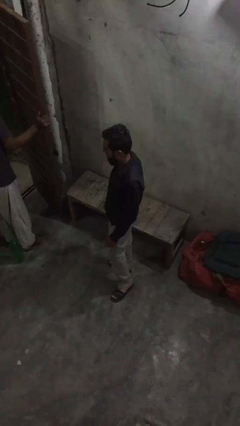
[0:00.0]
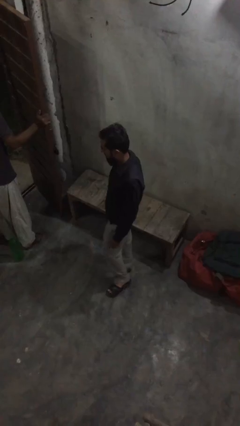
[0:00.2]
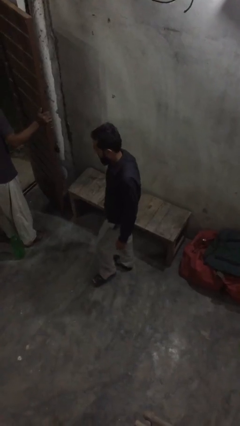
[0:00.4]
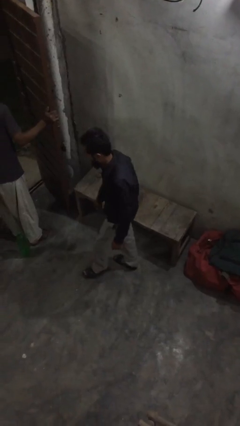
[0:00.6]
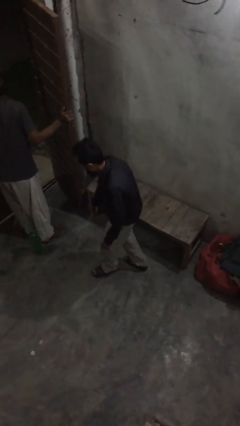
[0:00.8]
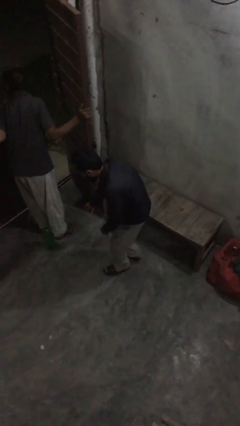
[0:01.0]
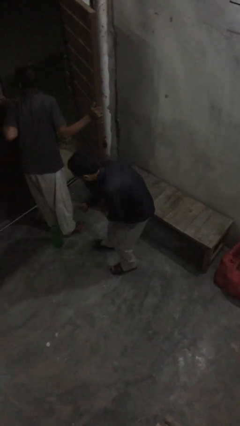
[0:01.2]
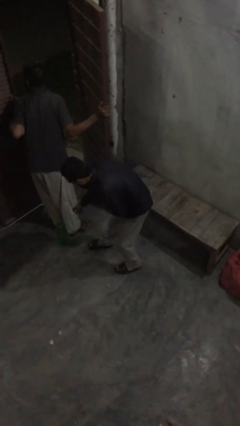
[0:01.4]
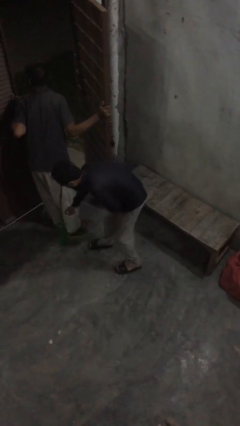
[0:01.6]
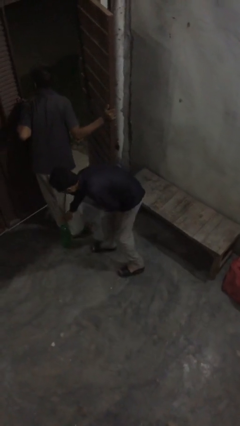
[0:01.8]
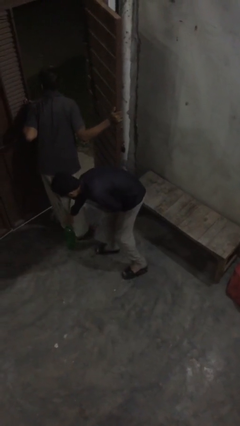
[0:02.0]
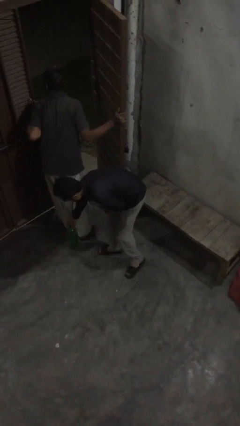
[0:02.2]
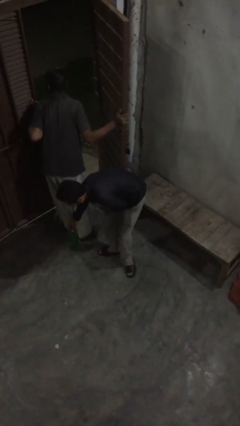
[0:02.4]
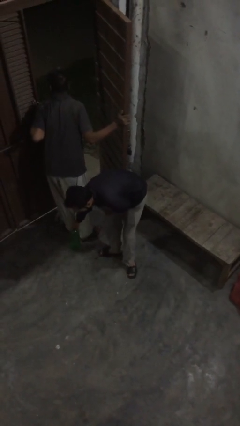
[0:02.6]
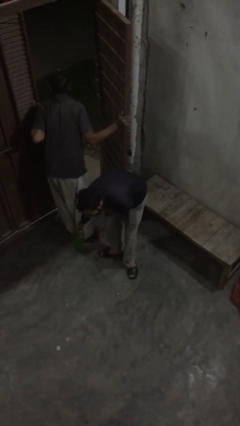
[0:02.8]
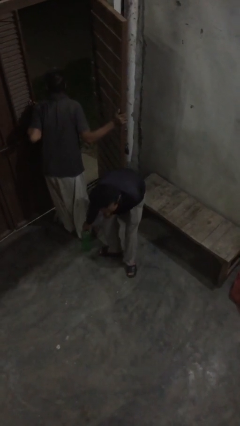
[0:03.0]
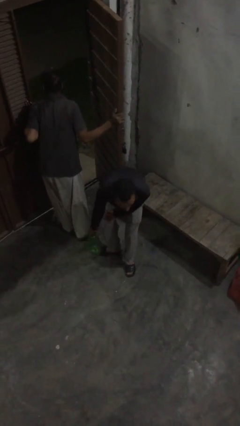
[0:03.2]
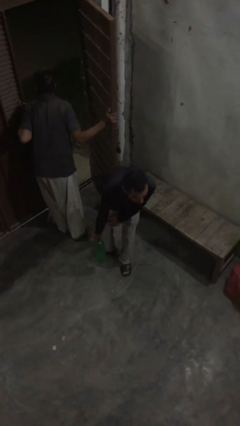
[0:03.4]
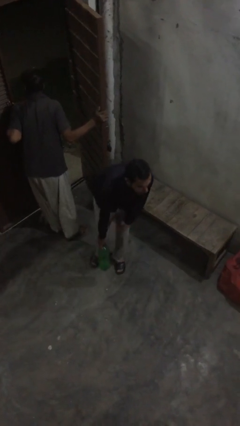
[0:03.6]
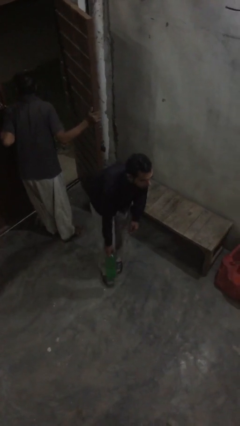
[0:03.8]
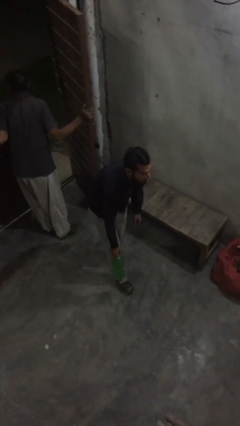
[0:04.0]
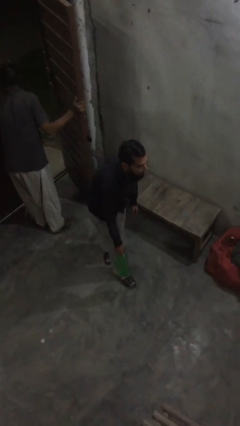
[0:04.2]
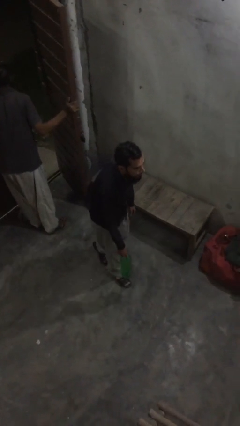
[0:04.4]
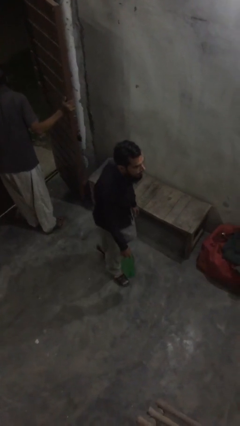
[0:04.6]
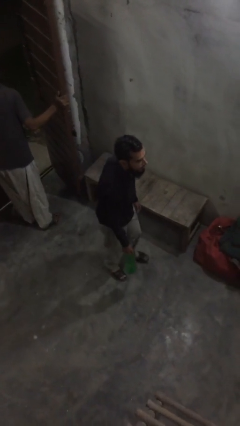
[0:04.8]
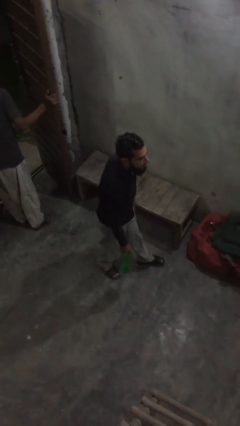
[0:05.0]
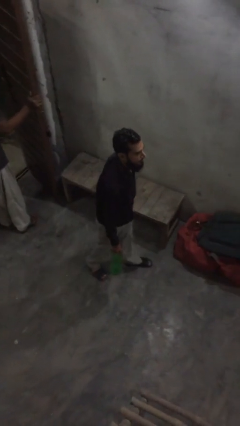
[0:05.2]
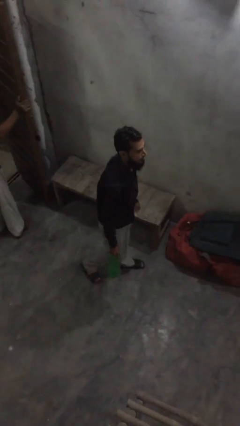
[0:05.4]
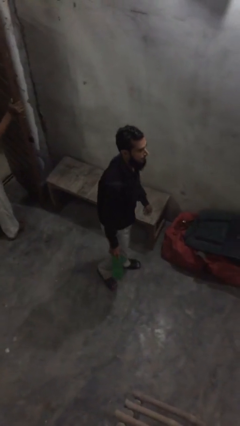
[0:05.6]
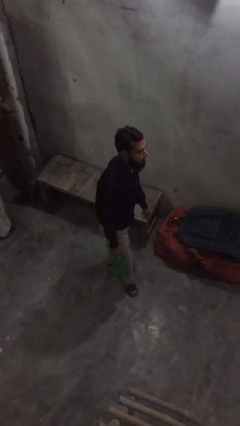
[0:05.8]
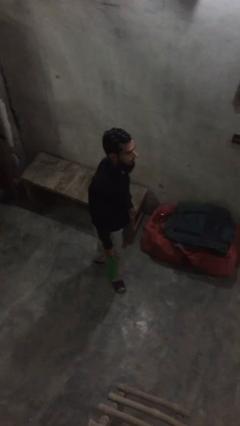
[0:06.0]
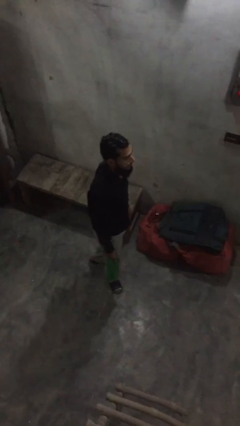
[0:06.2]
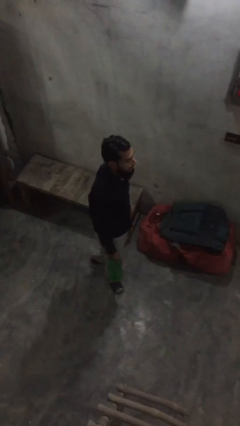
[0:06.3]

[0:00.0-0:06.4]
person steals object from person

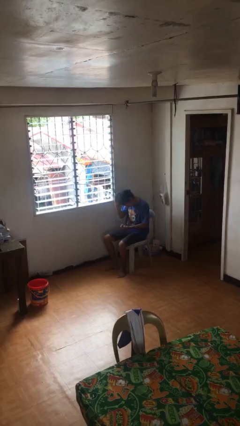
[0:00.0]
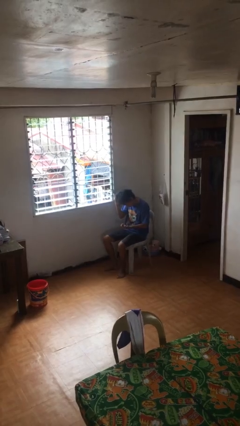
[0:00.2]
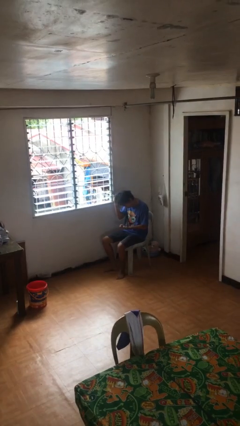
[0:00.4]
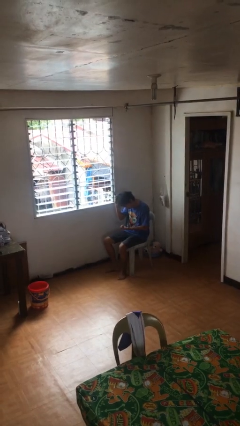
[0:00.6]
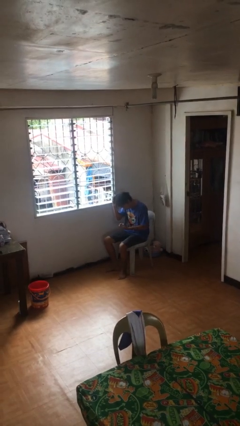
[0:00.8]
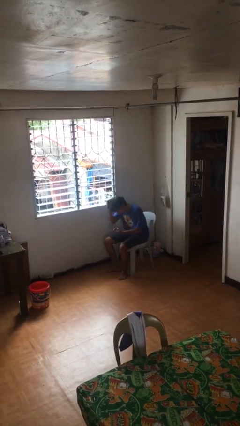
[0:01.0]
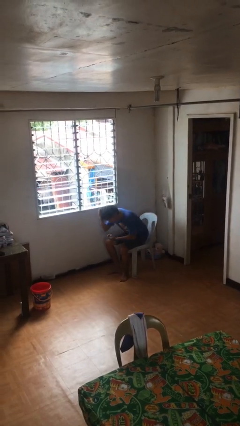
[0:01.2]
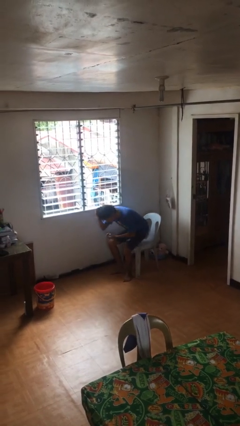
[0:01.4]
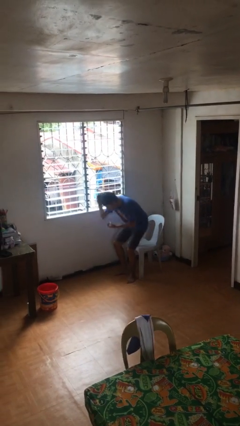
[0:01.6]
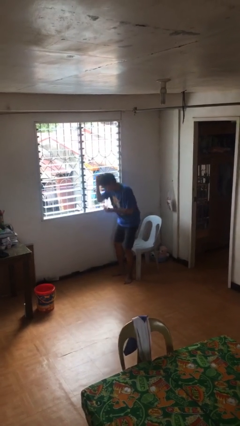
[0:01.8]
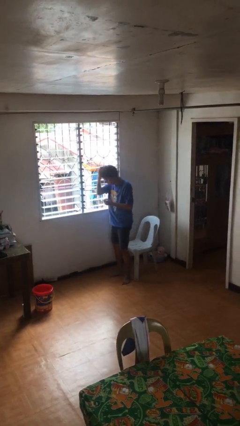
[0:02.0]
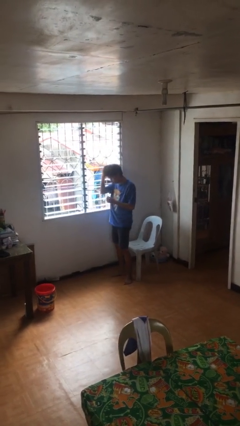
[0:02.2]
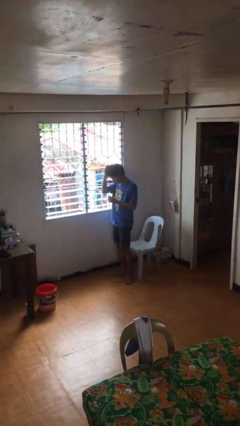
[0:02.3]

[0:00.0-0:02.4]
person stands up

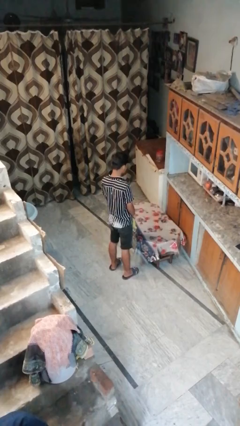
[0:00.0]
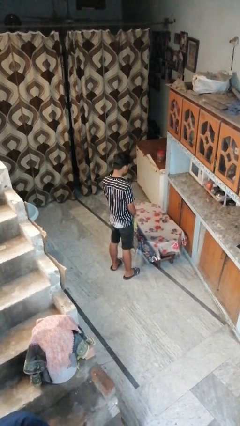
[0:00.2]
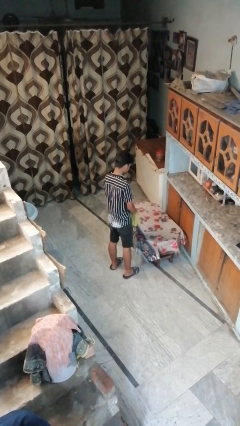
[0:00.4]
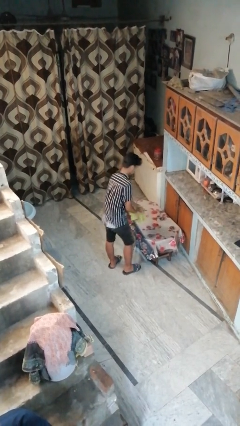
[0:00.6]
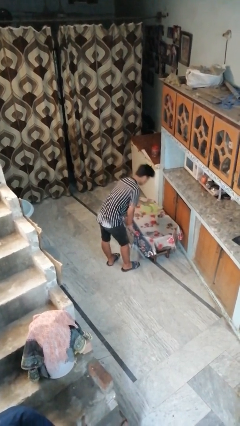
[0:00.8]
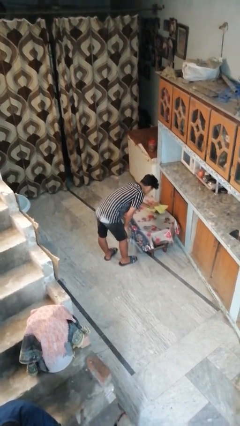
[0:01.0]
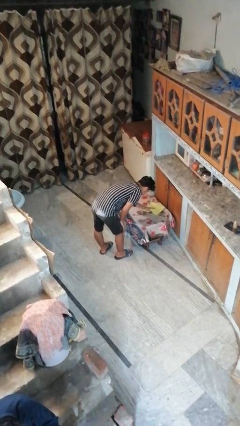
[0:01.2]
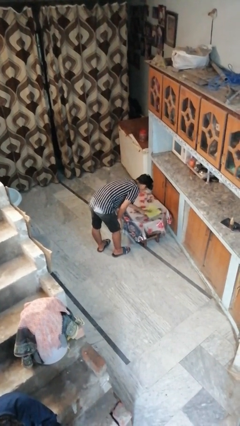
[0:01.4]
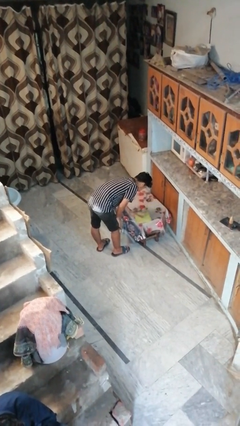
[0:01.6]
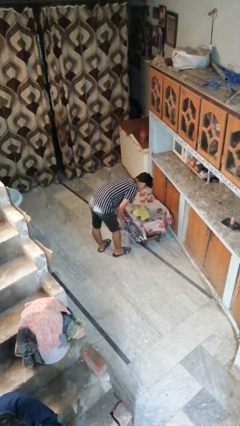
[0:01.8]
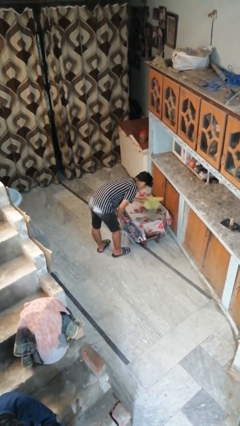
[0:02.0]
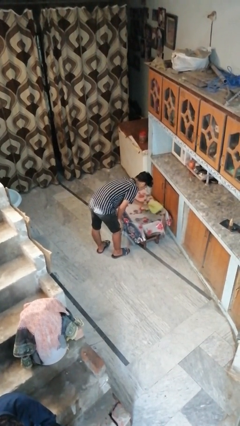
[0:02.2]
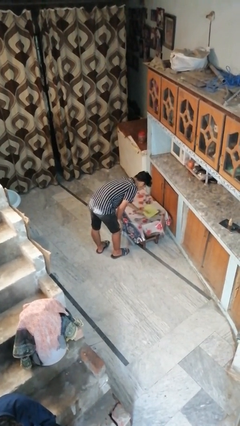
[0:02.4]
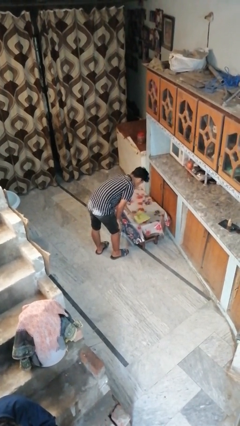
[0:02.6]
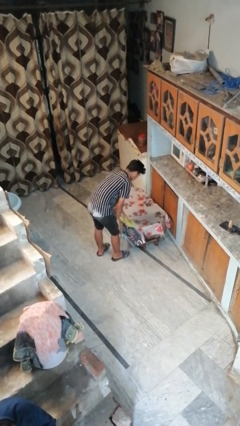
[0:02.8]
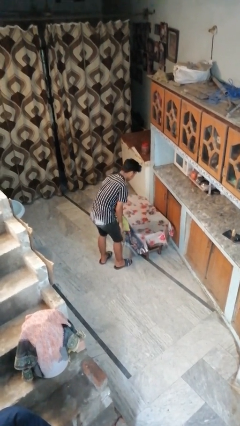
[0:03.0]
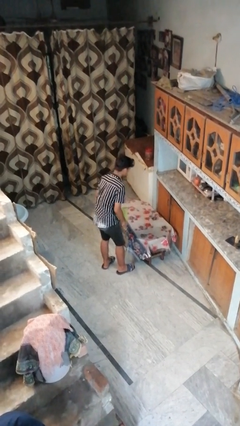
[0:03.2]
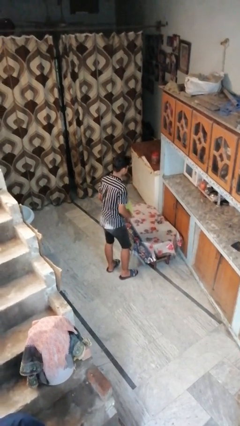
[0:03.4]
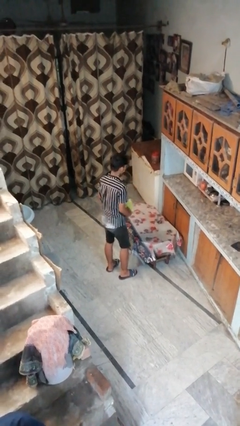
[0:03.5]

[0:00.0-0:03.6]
person cleans table with rag

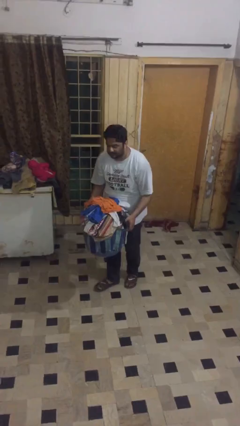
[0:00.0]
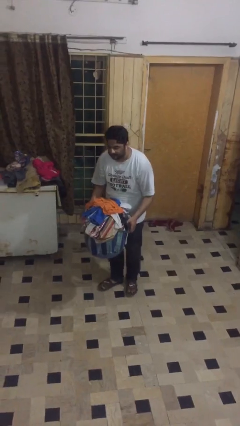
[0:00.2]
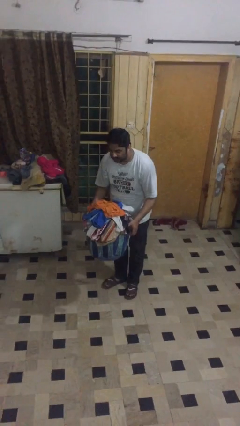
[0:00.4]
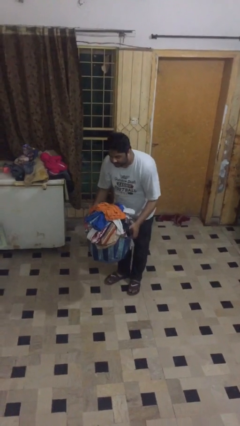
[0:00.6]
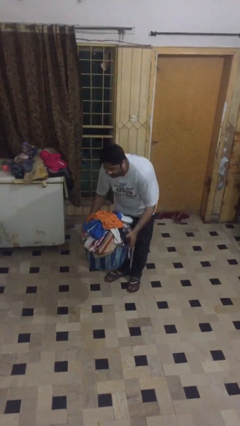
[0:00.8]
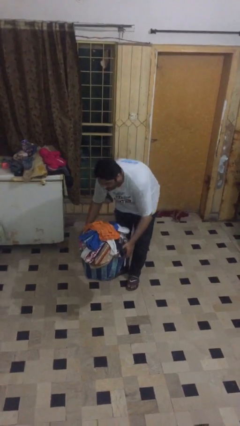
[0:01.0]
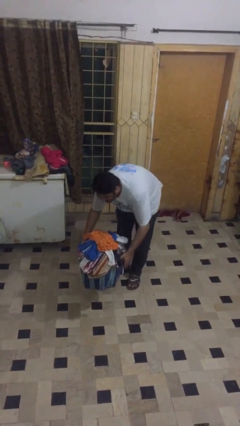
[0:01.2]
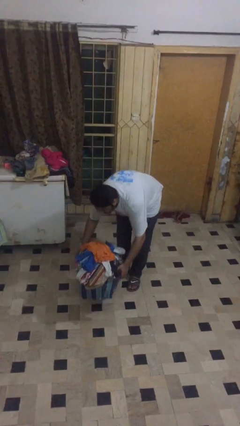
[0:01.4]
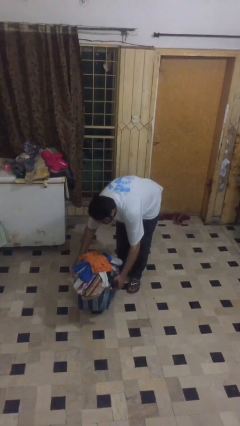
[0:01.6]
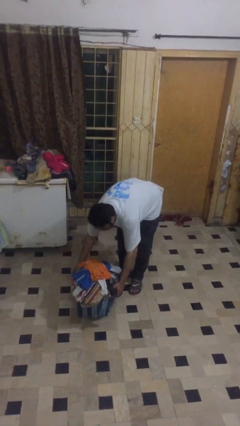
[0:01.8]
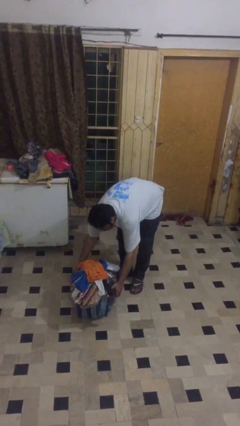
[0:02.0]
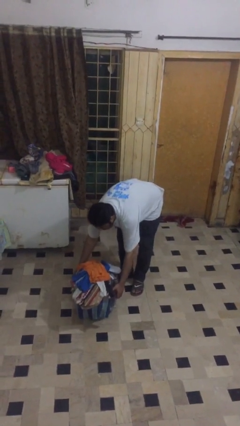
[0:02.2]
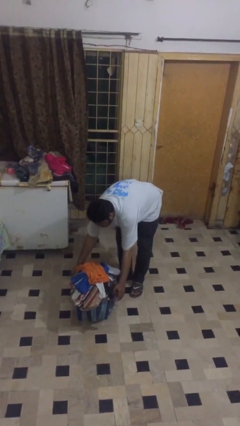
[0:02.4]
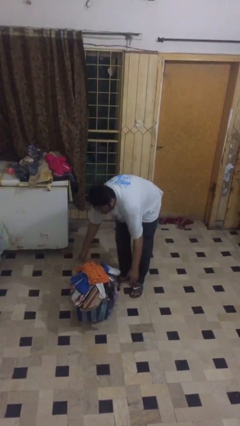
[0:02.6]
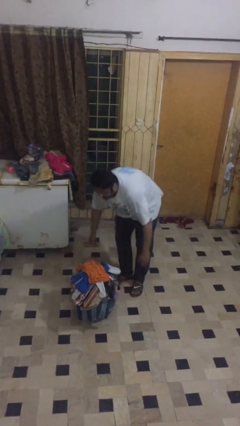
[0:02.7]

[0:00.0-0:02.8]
person puts down object on floor

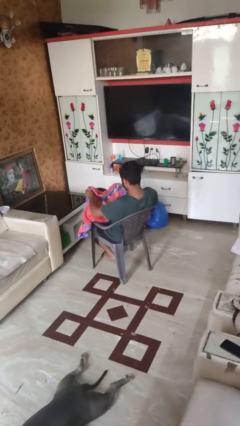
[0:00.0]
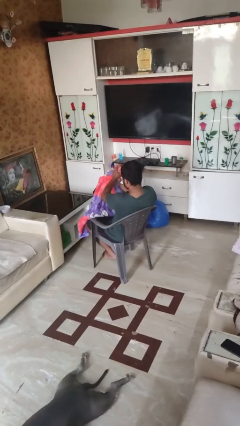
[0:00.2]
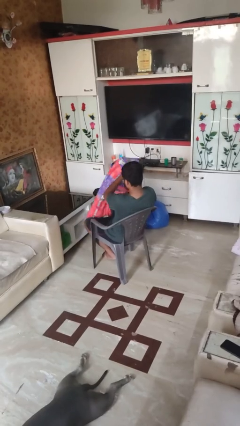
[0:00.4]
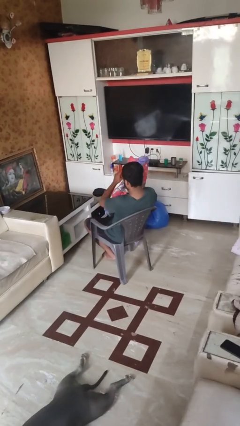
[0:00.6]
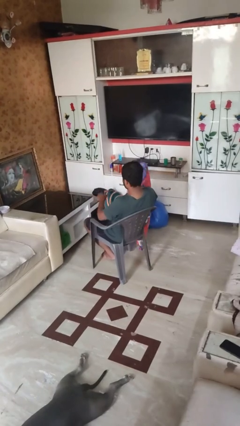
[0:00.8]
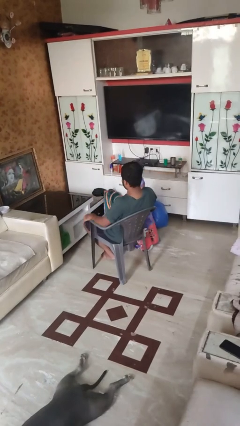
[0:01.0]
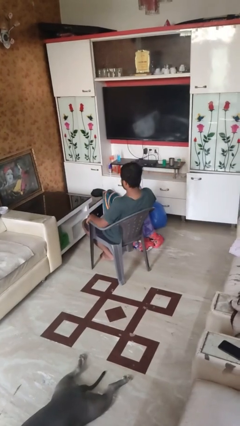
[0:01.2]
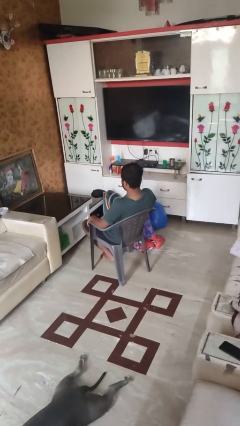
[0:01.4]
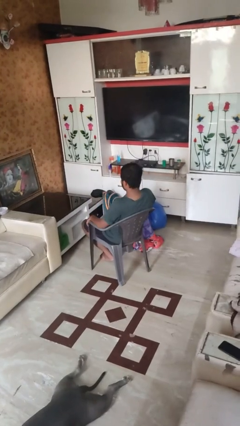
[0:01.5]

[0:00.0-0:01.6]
person uncovers with blanket

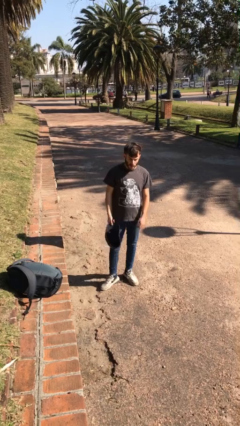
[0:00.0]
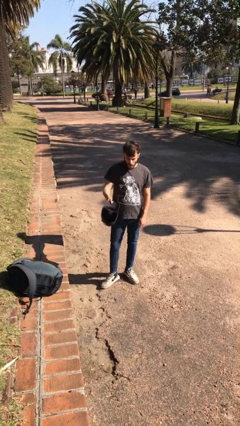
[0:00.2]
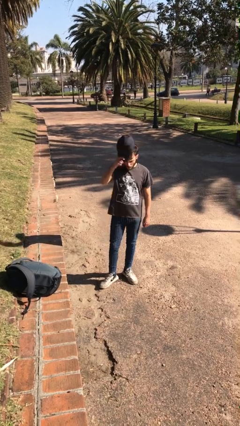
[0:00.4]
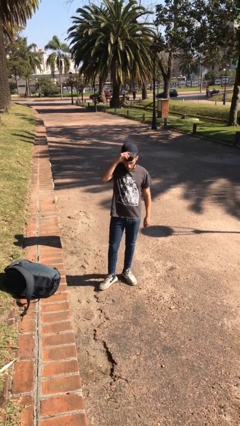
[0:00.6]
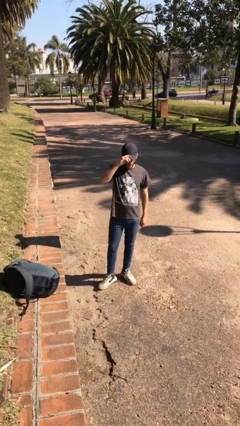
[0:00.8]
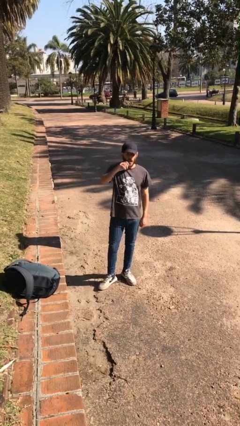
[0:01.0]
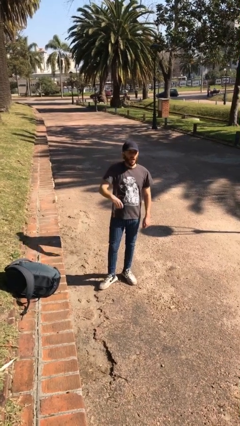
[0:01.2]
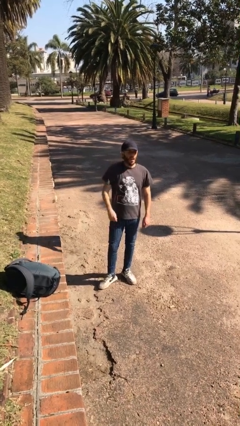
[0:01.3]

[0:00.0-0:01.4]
person puts on hat
